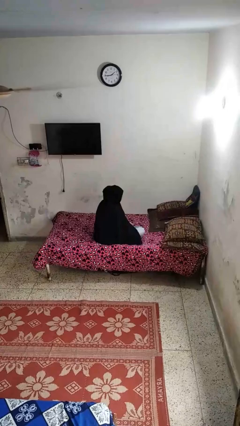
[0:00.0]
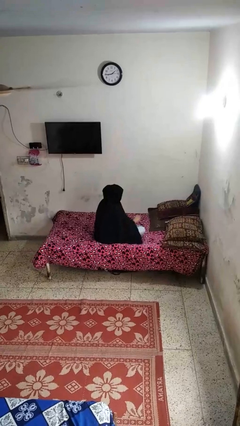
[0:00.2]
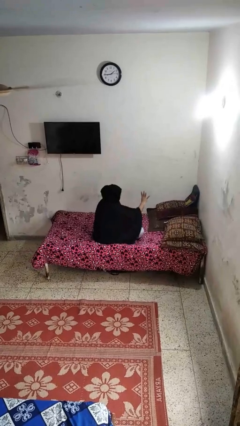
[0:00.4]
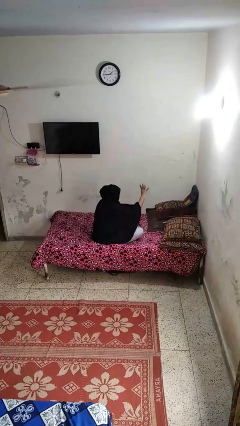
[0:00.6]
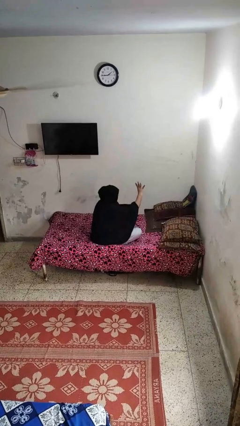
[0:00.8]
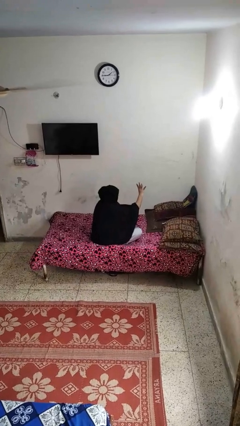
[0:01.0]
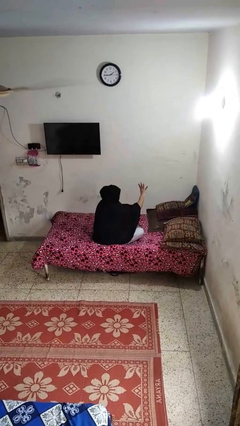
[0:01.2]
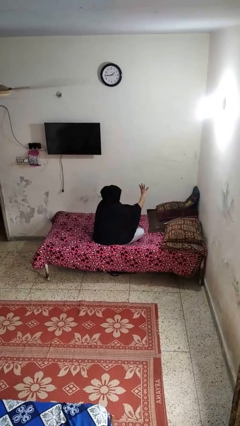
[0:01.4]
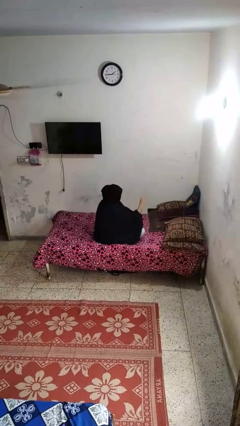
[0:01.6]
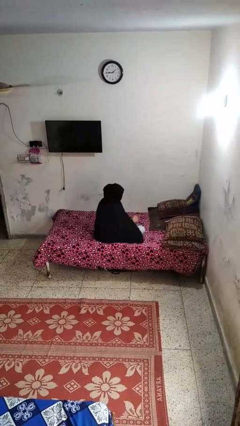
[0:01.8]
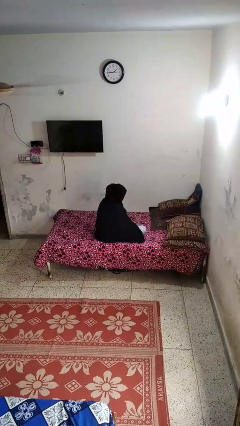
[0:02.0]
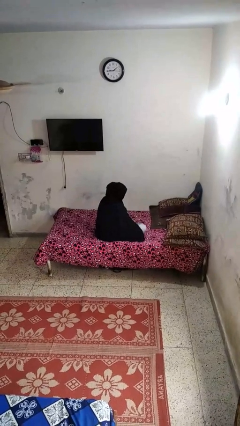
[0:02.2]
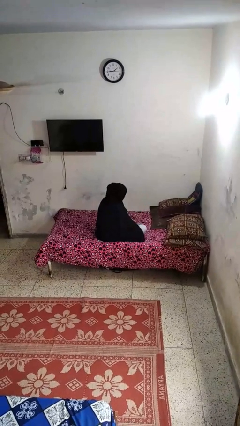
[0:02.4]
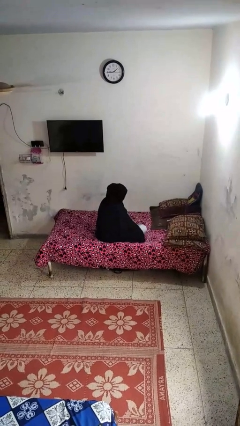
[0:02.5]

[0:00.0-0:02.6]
person gestures number four

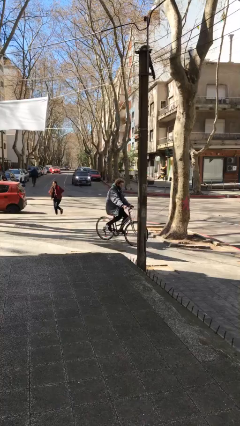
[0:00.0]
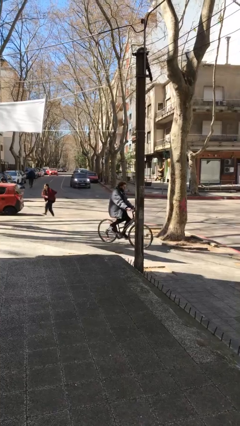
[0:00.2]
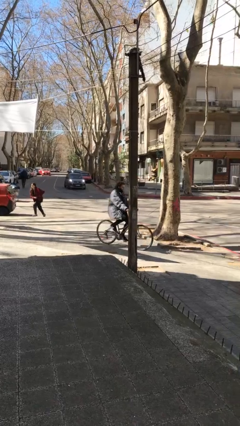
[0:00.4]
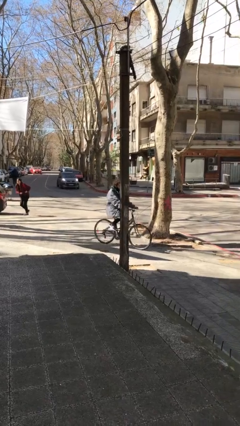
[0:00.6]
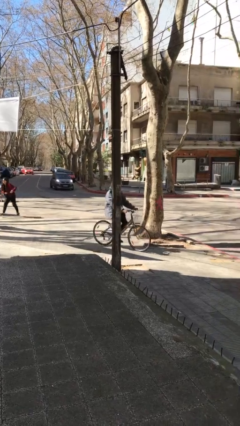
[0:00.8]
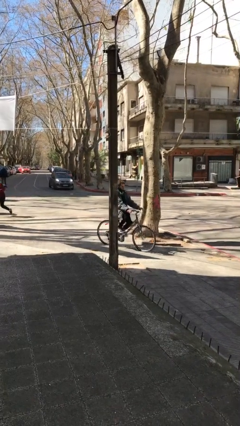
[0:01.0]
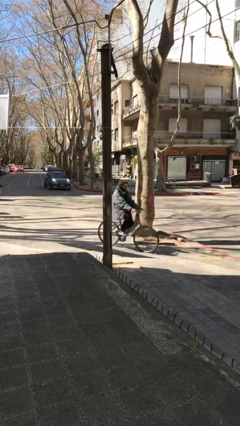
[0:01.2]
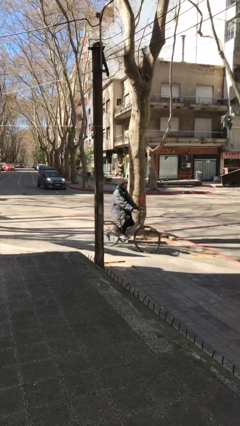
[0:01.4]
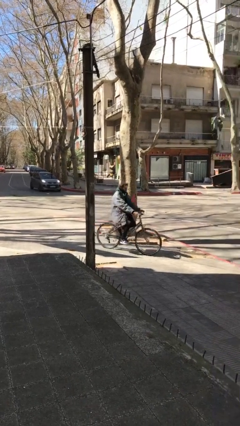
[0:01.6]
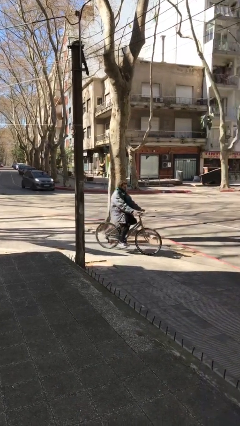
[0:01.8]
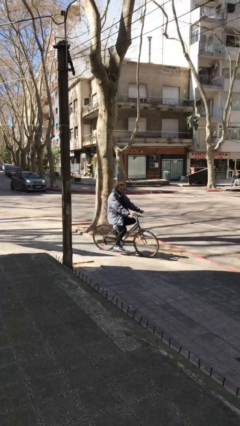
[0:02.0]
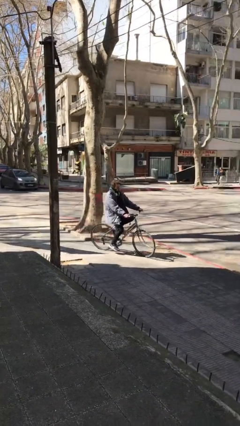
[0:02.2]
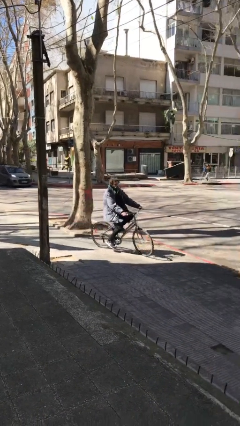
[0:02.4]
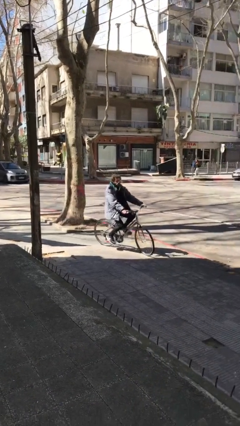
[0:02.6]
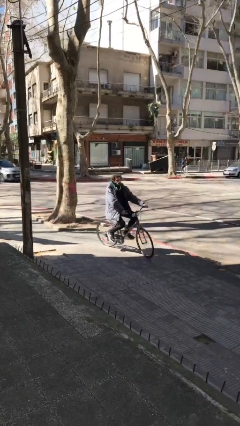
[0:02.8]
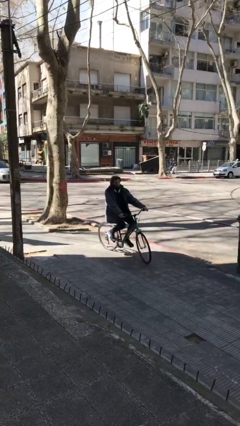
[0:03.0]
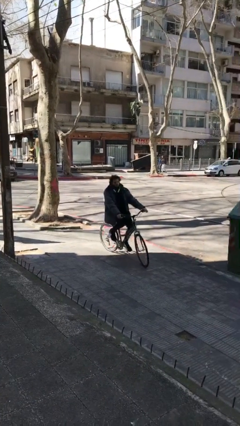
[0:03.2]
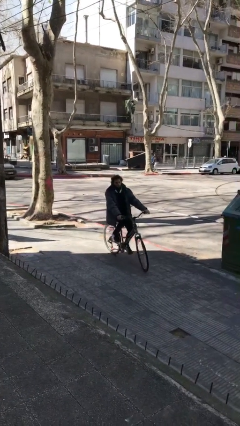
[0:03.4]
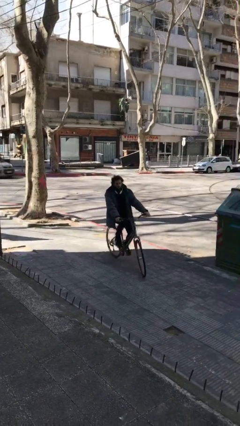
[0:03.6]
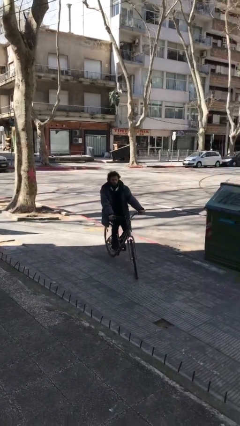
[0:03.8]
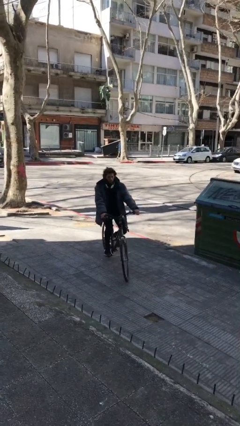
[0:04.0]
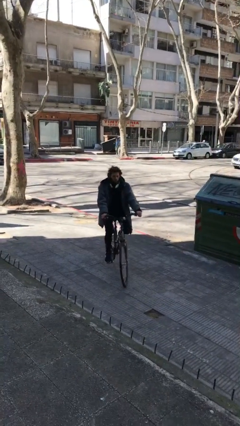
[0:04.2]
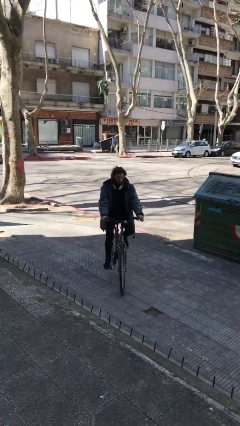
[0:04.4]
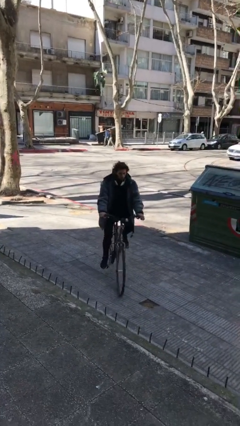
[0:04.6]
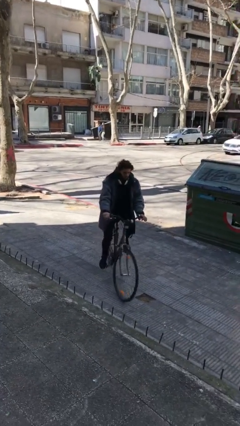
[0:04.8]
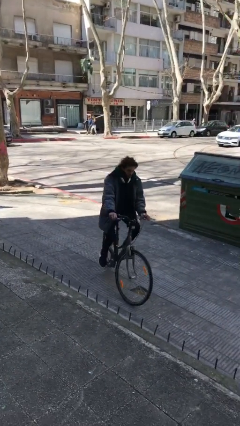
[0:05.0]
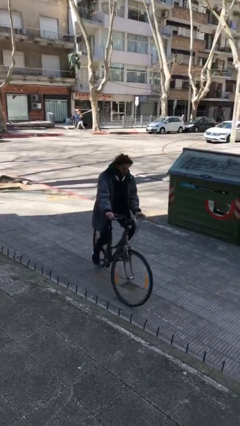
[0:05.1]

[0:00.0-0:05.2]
person rides bicycle

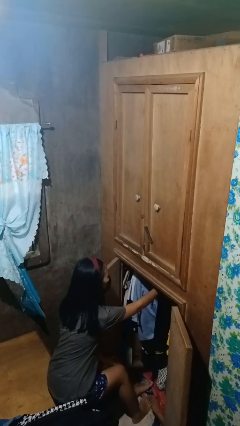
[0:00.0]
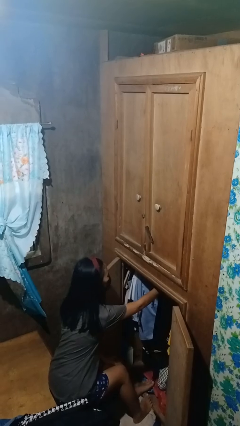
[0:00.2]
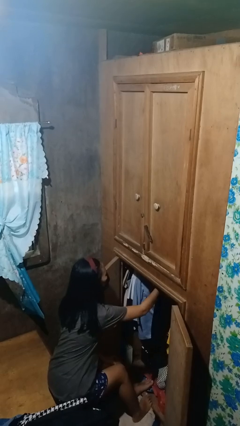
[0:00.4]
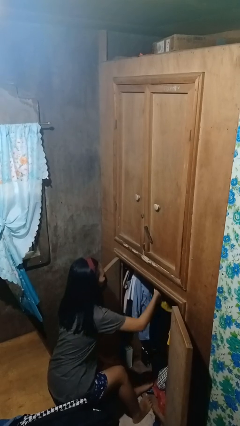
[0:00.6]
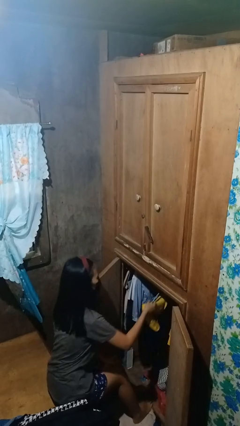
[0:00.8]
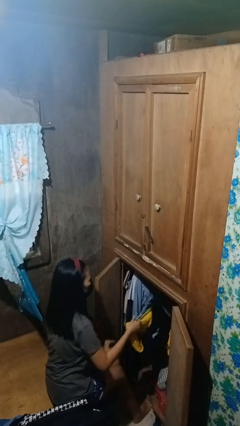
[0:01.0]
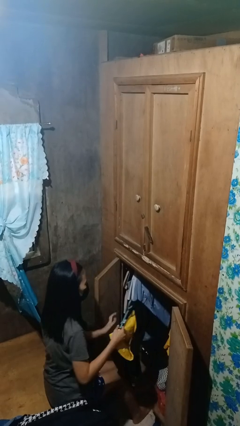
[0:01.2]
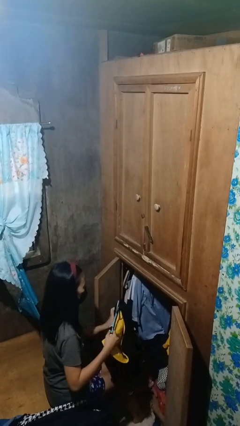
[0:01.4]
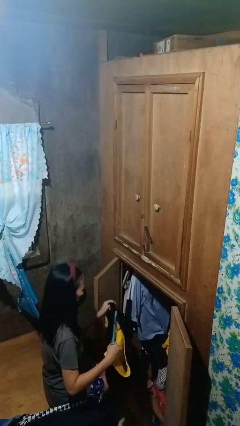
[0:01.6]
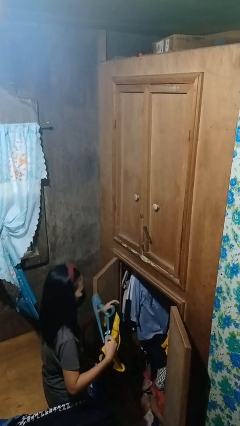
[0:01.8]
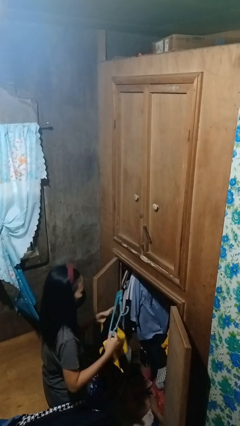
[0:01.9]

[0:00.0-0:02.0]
person takes clothes from closet

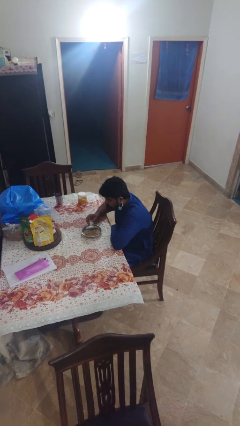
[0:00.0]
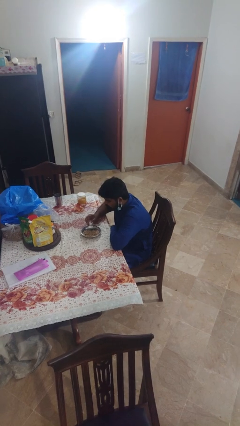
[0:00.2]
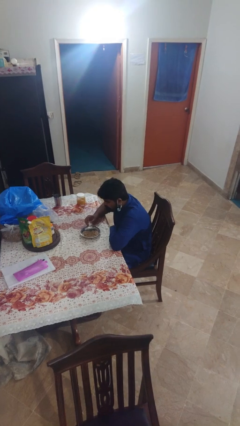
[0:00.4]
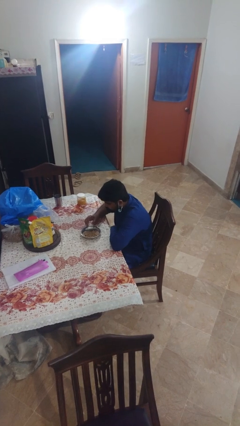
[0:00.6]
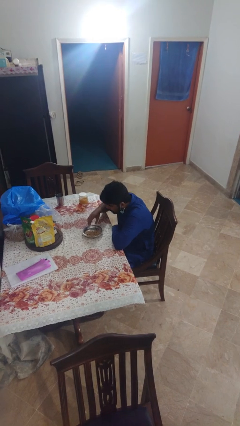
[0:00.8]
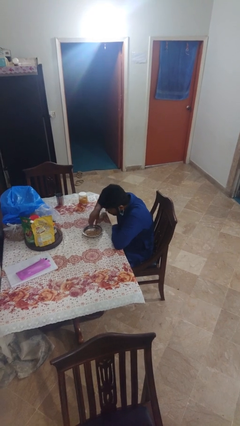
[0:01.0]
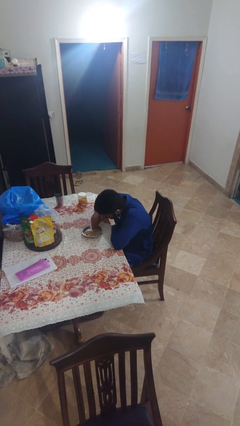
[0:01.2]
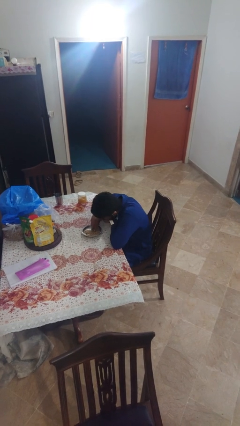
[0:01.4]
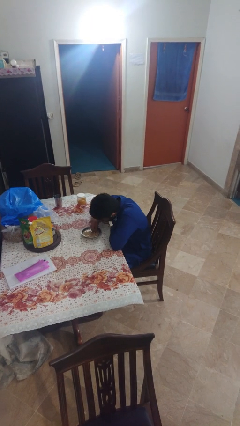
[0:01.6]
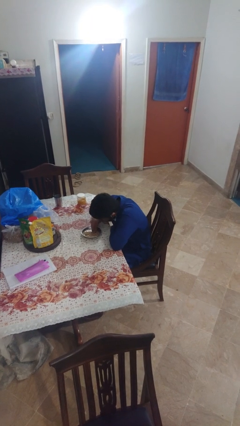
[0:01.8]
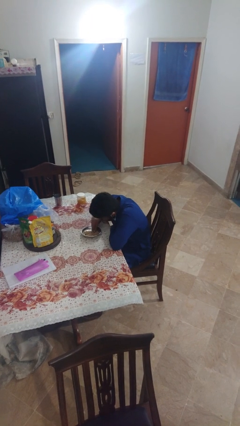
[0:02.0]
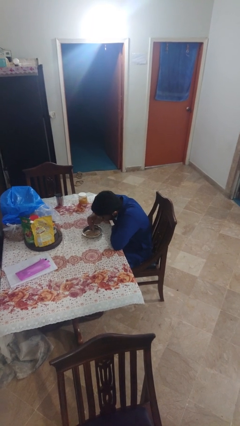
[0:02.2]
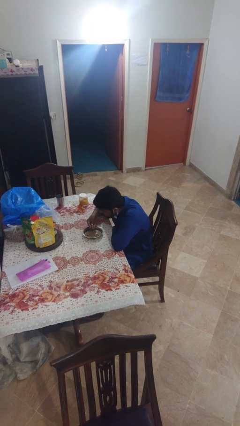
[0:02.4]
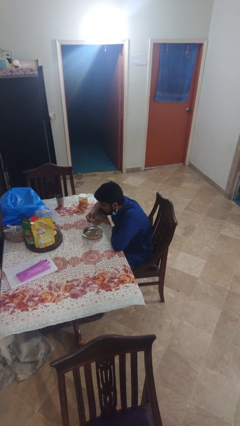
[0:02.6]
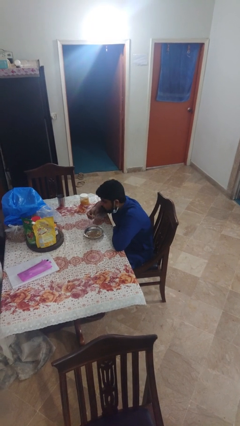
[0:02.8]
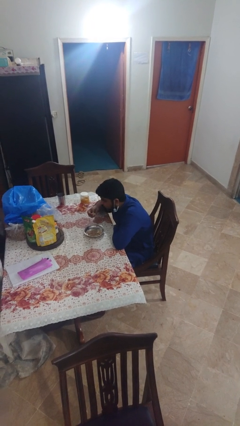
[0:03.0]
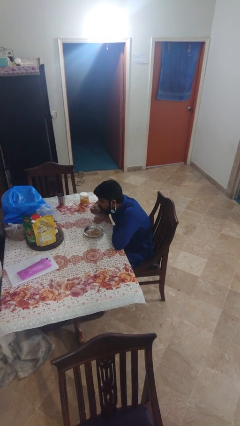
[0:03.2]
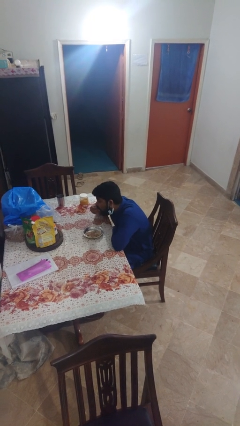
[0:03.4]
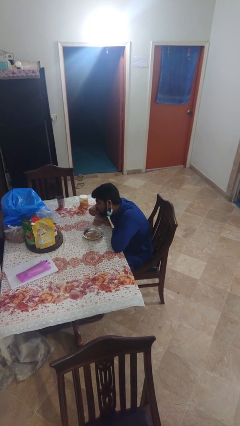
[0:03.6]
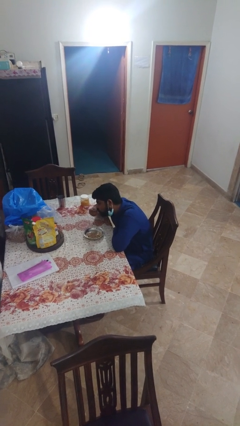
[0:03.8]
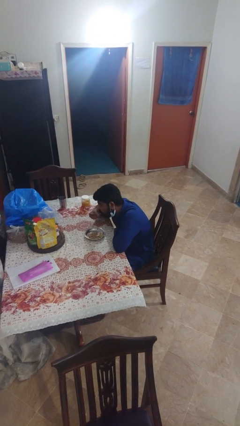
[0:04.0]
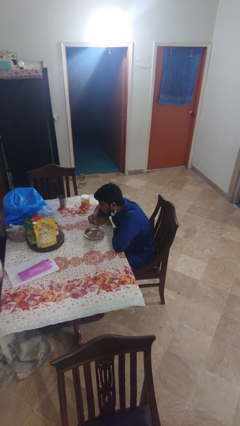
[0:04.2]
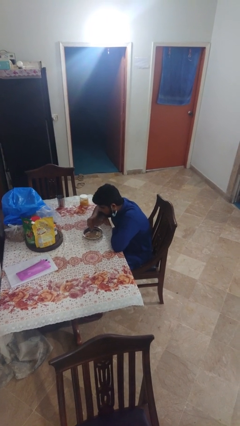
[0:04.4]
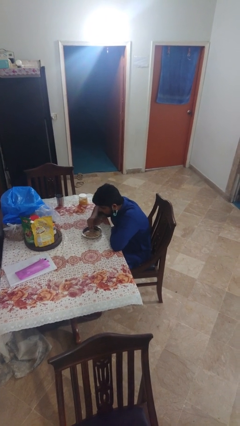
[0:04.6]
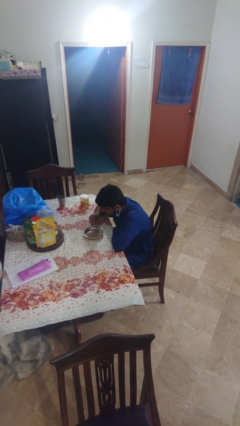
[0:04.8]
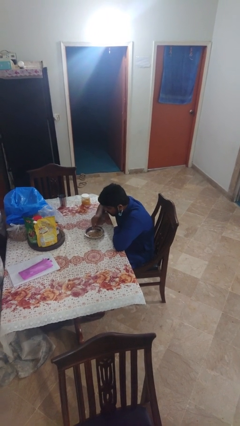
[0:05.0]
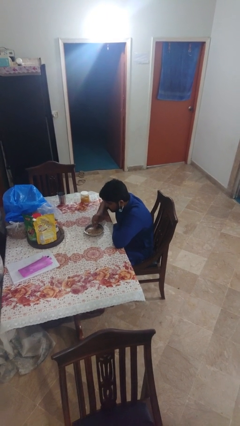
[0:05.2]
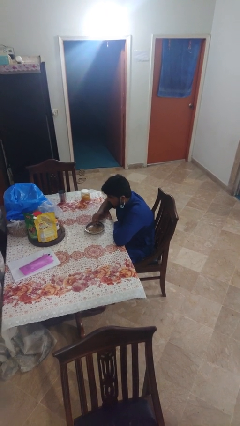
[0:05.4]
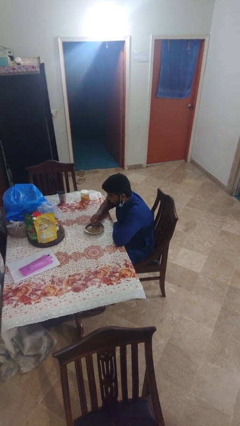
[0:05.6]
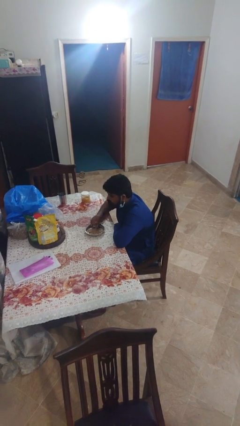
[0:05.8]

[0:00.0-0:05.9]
person eats with hands

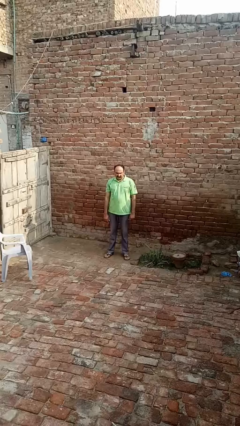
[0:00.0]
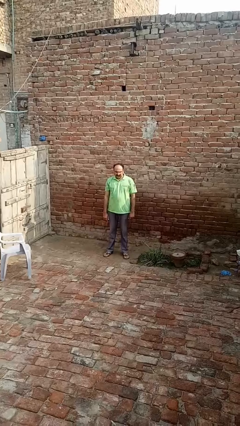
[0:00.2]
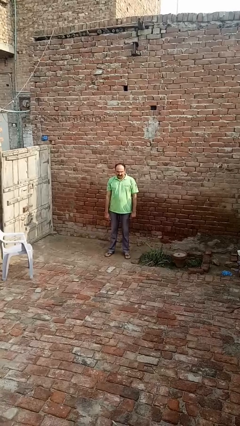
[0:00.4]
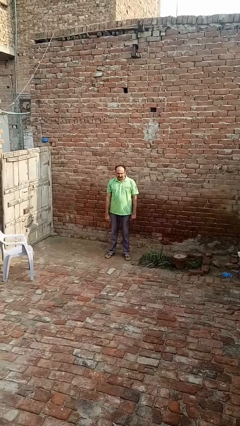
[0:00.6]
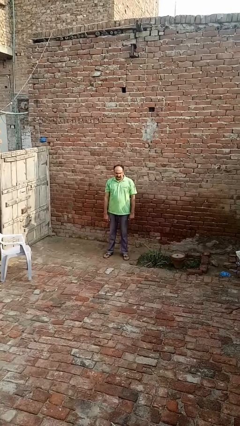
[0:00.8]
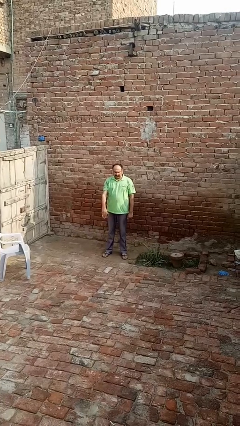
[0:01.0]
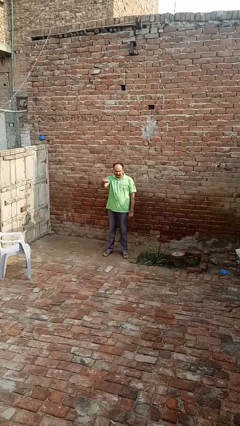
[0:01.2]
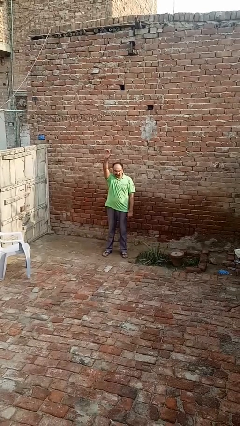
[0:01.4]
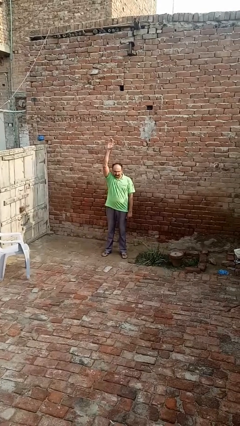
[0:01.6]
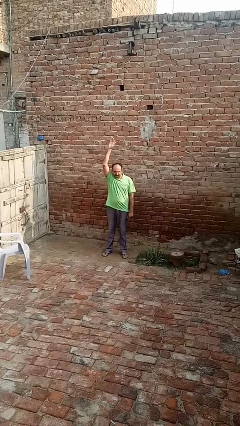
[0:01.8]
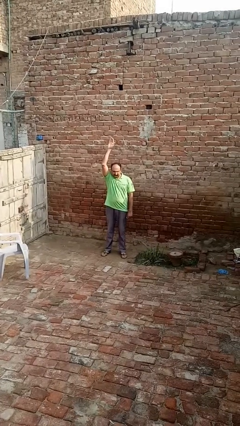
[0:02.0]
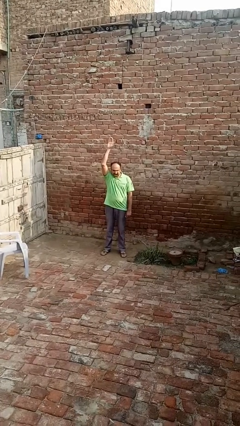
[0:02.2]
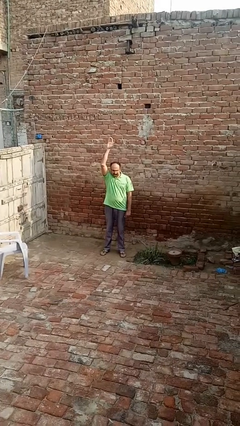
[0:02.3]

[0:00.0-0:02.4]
person gestures swipe up
